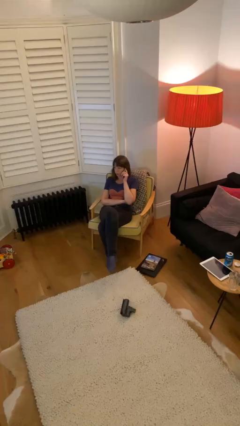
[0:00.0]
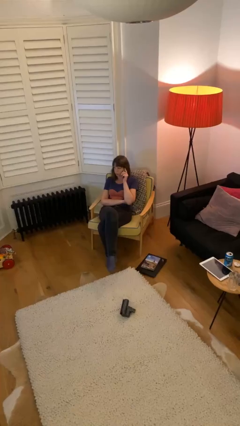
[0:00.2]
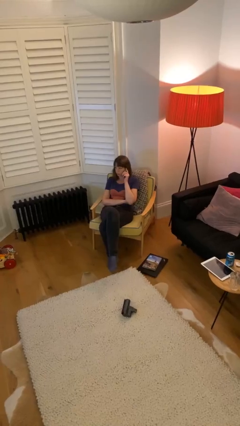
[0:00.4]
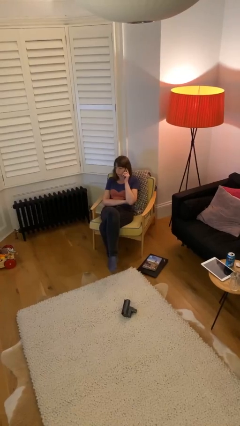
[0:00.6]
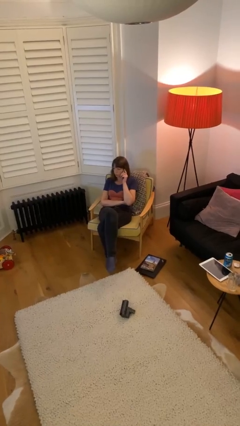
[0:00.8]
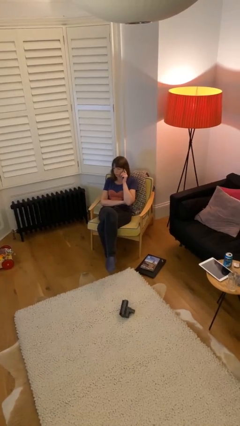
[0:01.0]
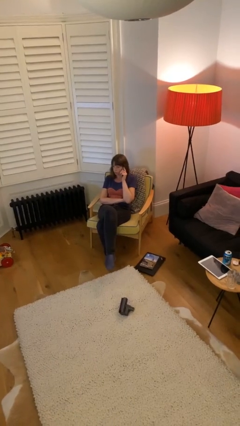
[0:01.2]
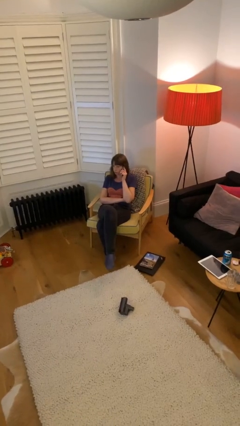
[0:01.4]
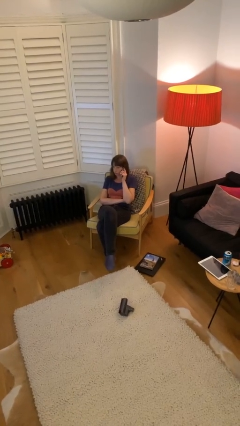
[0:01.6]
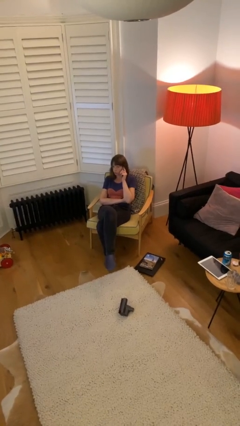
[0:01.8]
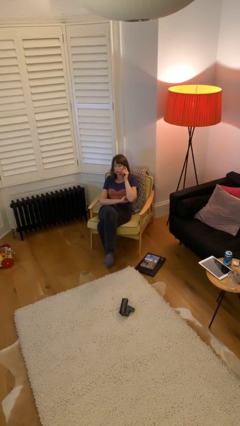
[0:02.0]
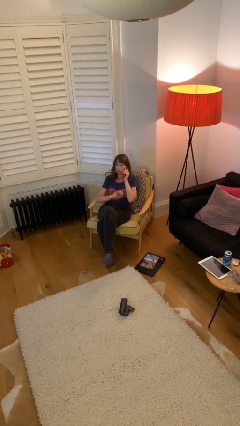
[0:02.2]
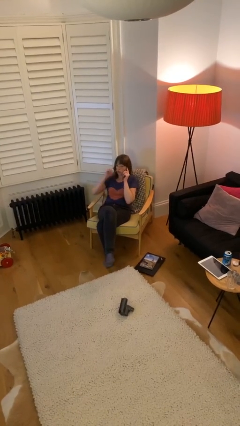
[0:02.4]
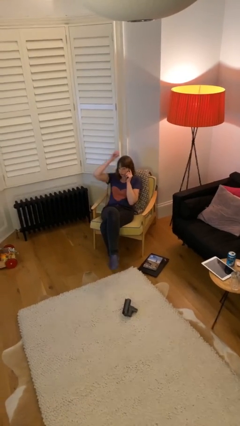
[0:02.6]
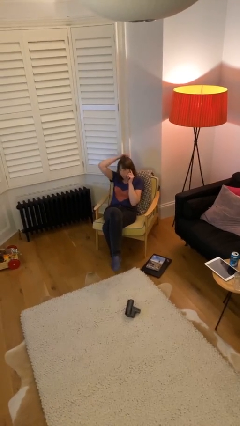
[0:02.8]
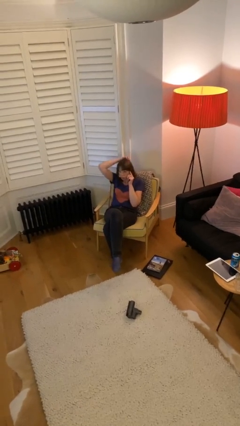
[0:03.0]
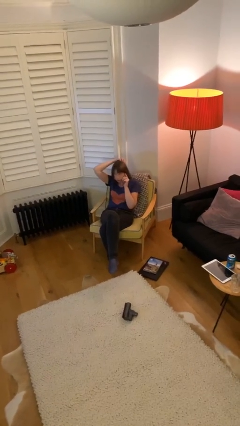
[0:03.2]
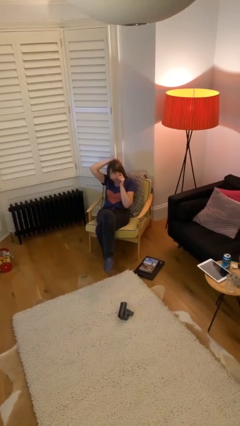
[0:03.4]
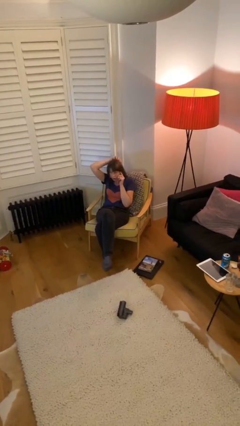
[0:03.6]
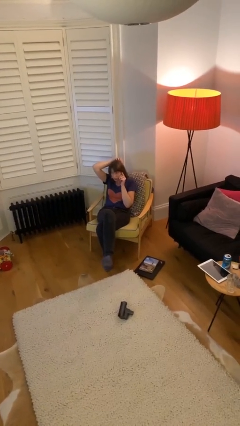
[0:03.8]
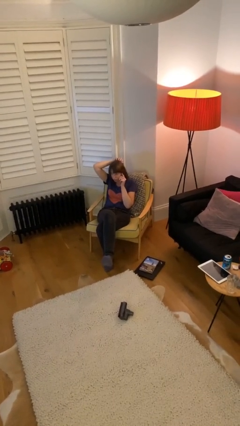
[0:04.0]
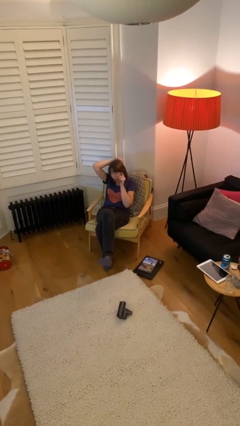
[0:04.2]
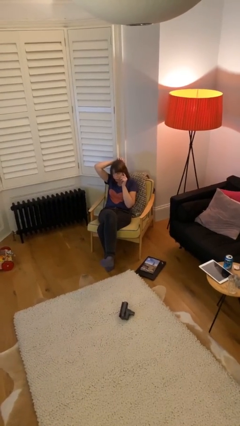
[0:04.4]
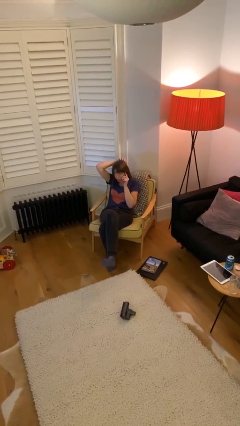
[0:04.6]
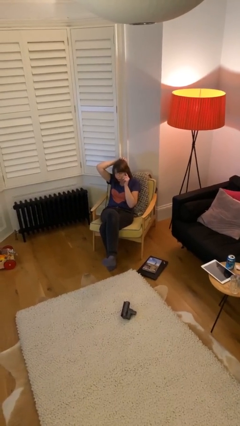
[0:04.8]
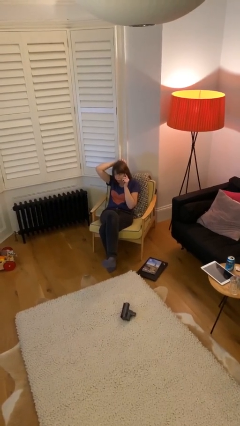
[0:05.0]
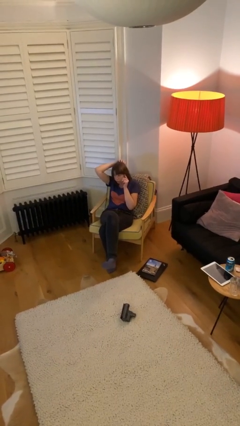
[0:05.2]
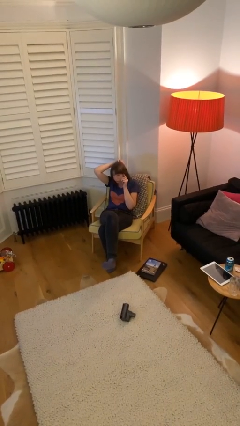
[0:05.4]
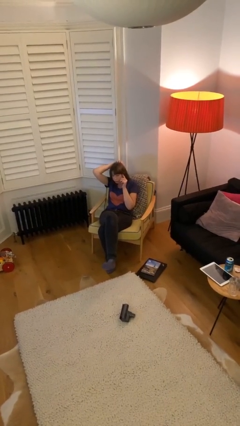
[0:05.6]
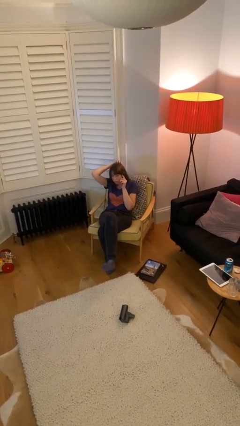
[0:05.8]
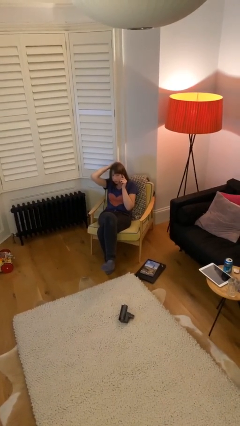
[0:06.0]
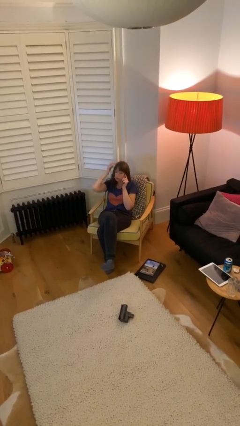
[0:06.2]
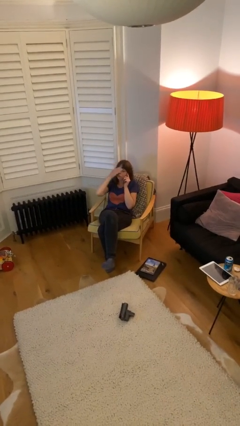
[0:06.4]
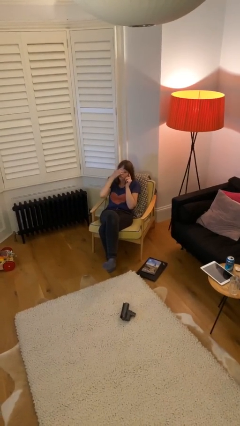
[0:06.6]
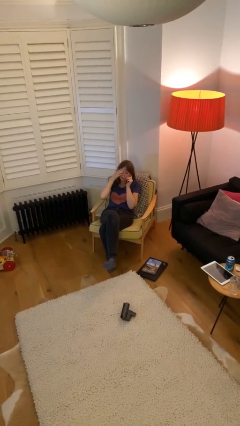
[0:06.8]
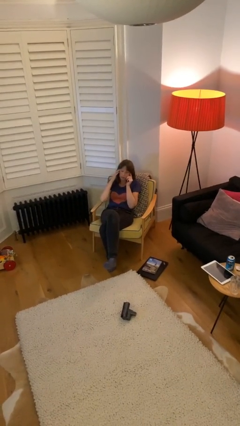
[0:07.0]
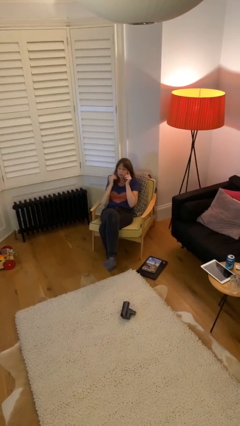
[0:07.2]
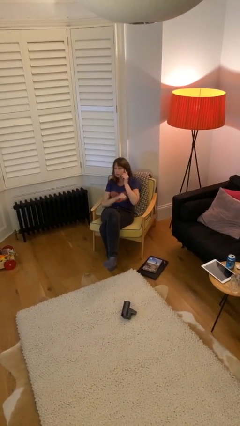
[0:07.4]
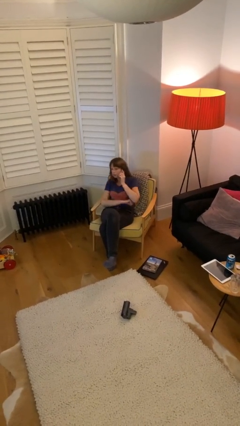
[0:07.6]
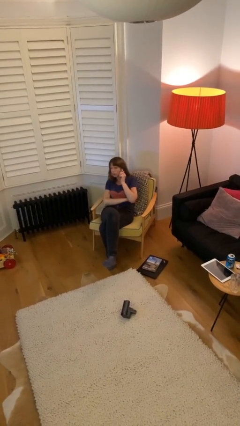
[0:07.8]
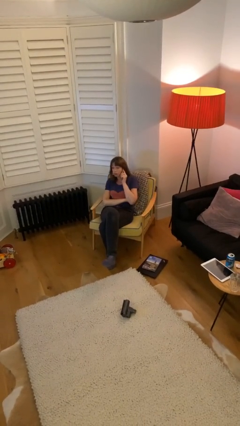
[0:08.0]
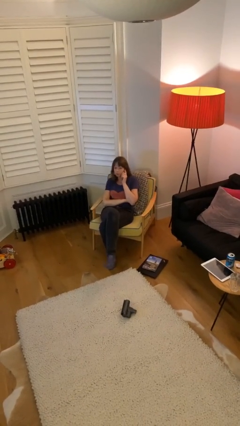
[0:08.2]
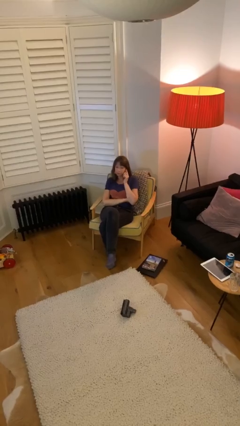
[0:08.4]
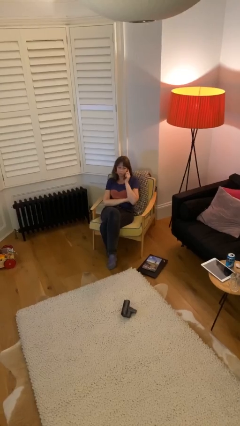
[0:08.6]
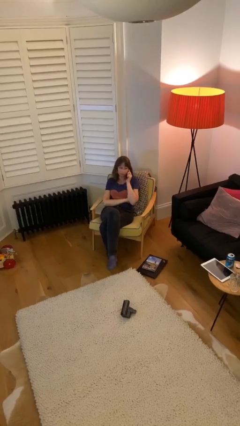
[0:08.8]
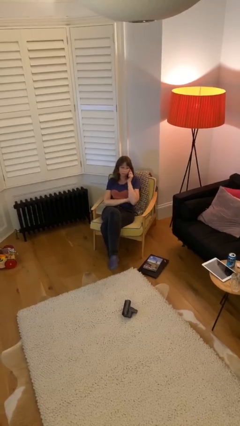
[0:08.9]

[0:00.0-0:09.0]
person talks on phone

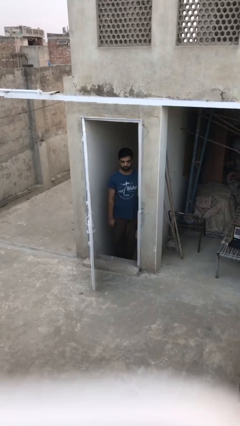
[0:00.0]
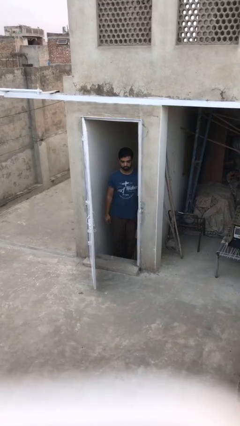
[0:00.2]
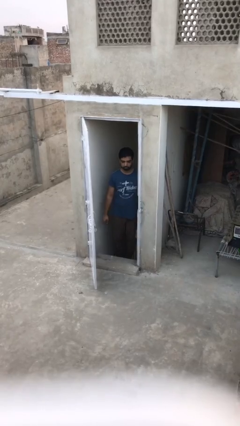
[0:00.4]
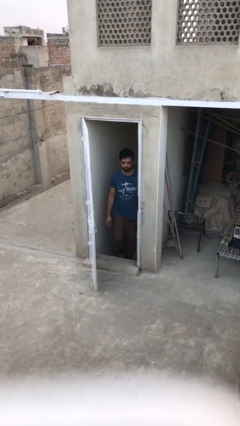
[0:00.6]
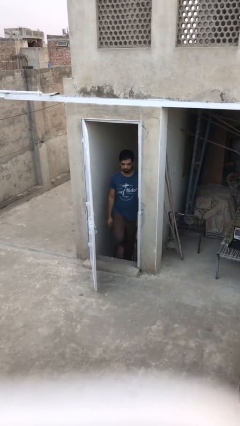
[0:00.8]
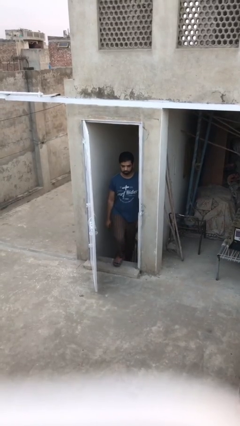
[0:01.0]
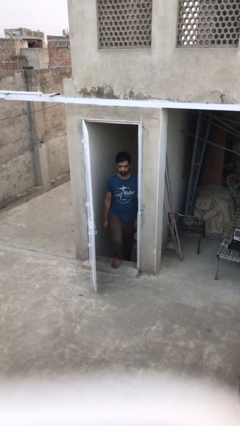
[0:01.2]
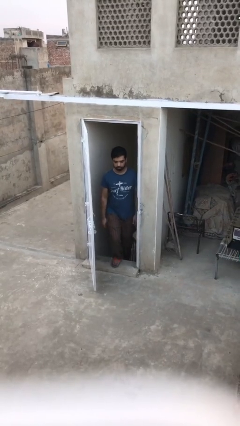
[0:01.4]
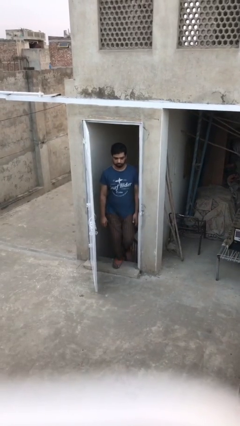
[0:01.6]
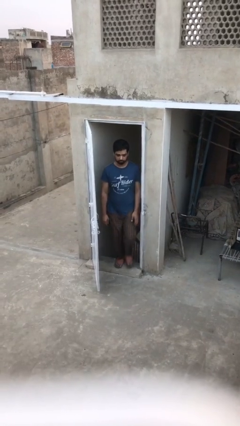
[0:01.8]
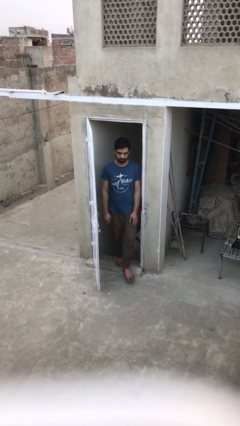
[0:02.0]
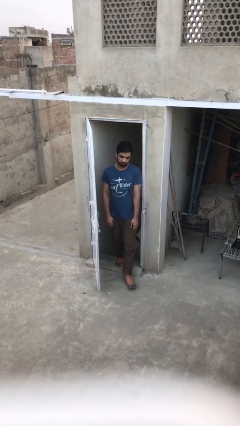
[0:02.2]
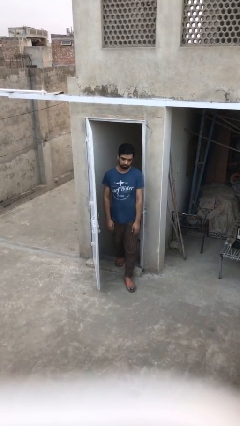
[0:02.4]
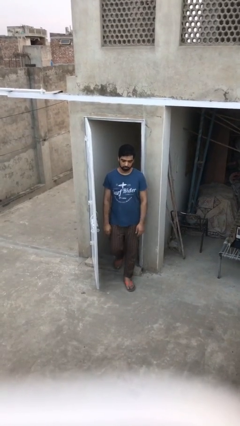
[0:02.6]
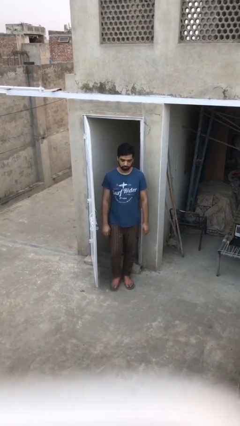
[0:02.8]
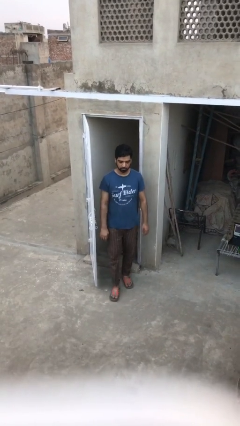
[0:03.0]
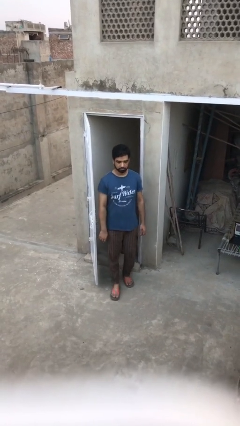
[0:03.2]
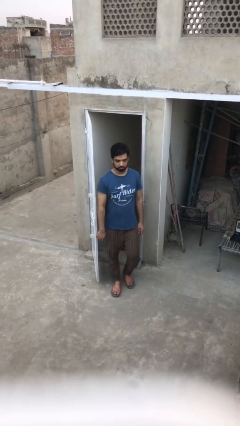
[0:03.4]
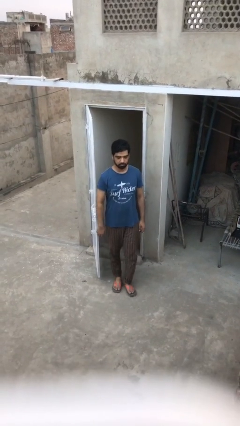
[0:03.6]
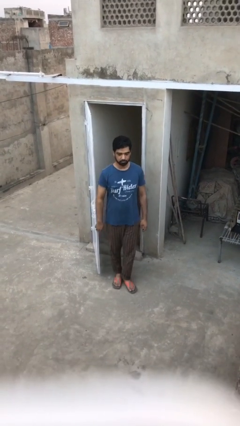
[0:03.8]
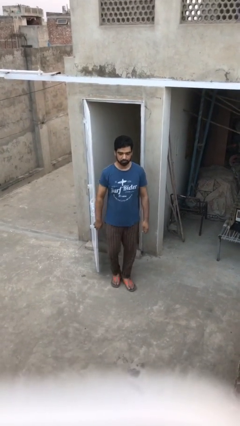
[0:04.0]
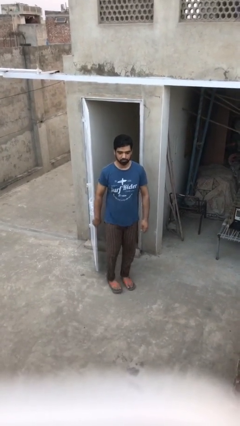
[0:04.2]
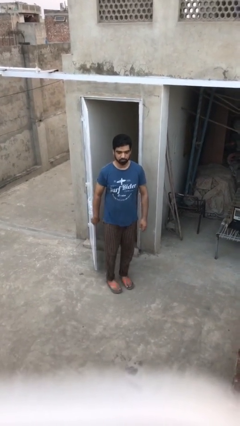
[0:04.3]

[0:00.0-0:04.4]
person enters scene through structure

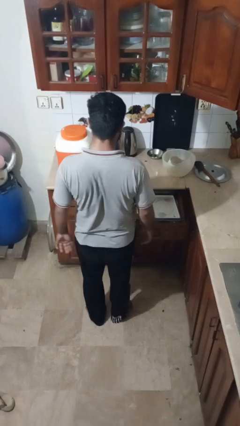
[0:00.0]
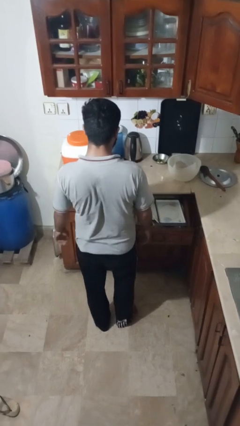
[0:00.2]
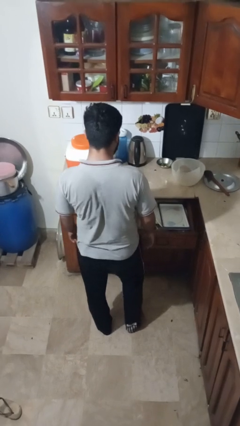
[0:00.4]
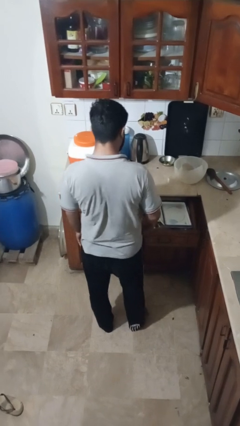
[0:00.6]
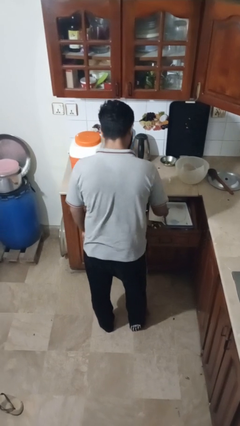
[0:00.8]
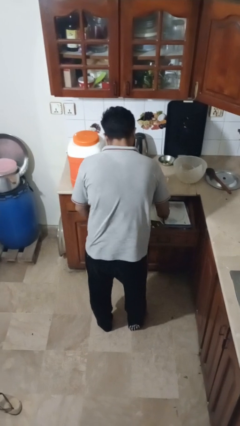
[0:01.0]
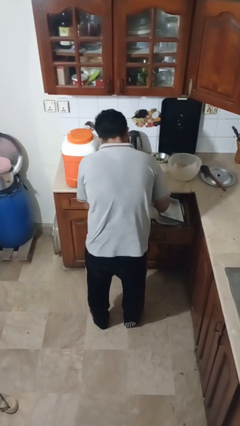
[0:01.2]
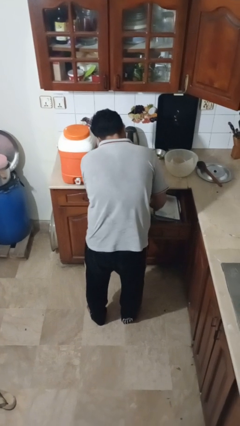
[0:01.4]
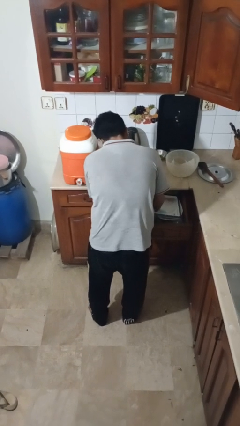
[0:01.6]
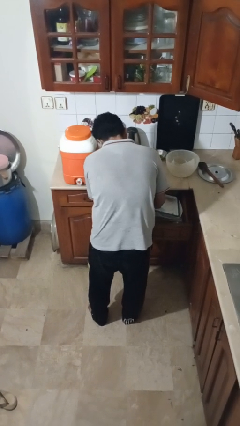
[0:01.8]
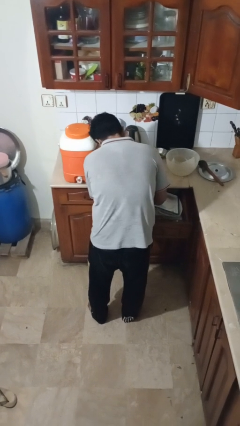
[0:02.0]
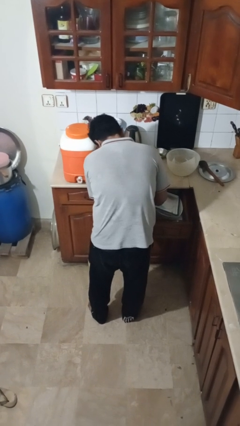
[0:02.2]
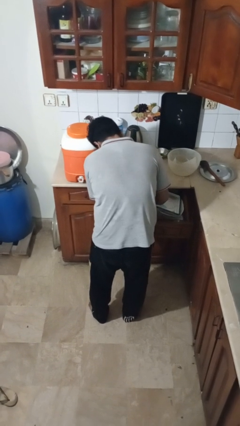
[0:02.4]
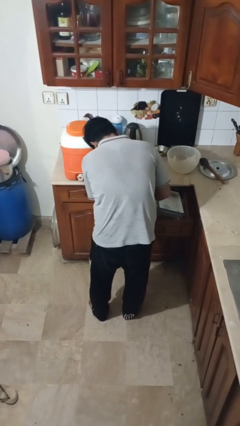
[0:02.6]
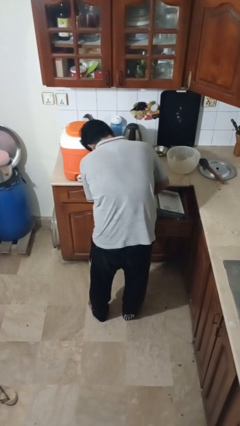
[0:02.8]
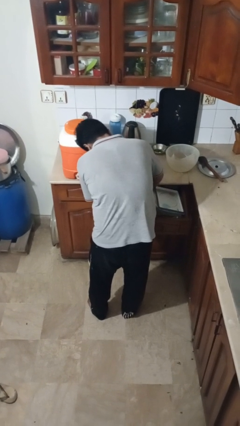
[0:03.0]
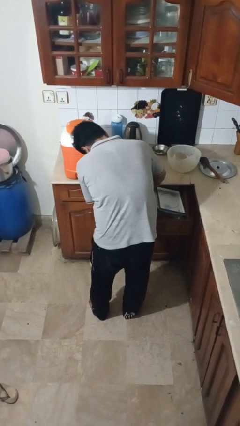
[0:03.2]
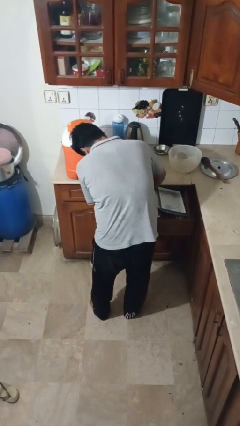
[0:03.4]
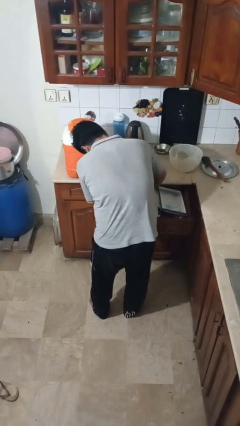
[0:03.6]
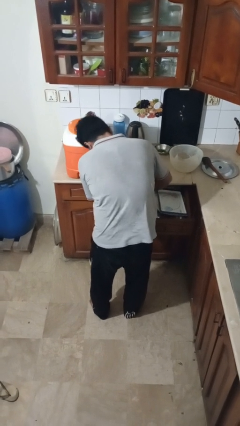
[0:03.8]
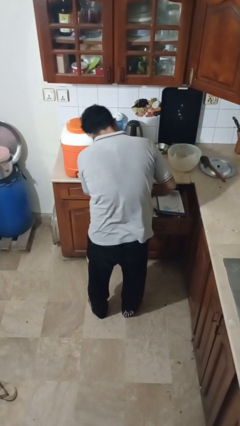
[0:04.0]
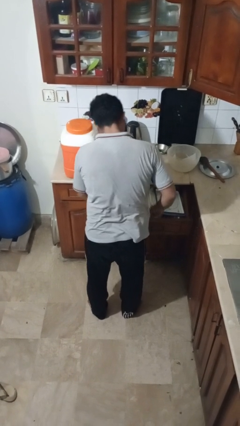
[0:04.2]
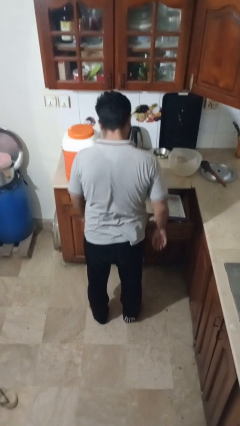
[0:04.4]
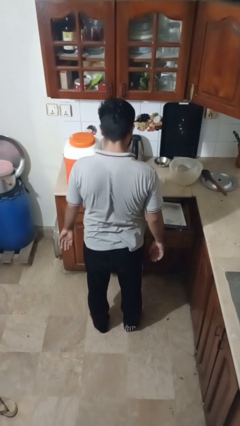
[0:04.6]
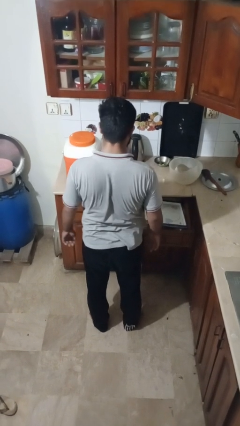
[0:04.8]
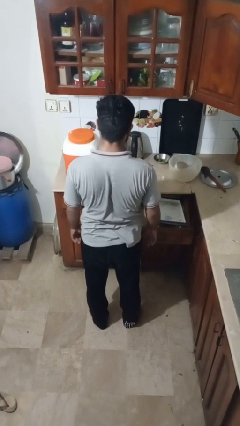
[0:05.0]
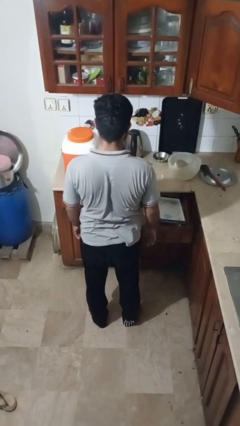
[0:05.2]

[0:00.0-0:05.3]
person searches in kitchen drawer
